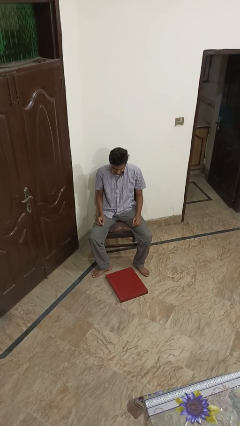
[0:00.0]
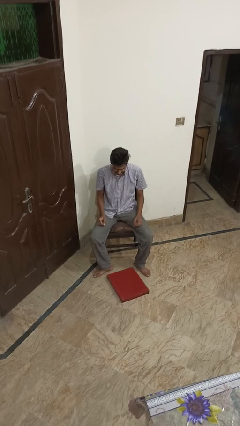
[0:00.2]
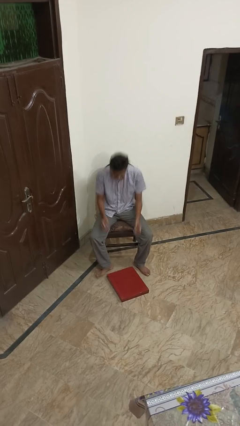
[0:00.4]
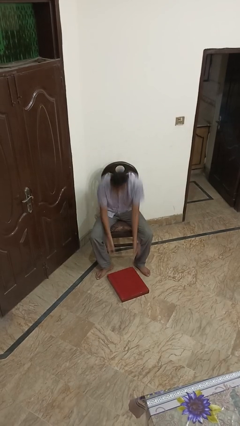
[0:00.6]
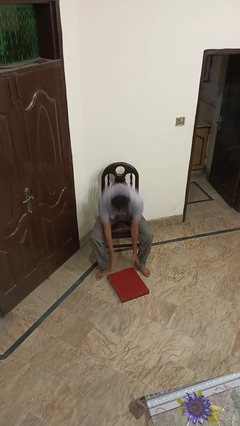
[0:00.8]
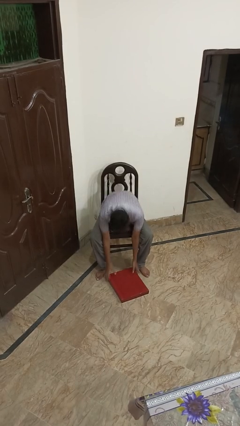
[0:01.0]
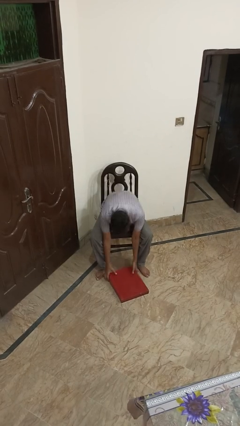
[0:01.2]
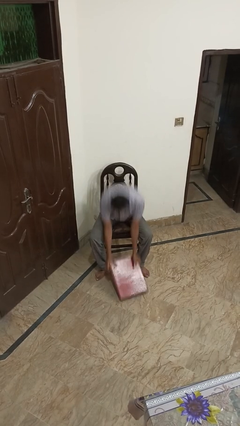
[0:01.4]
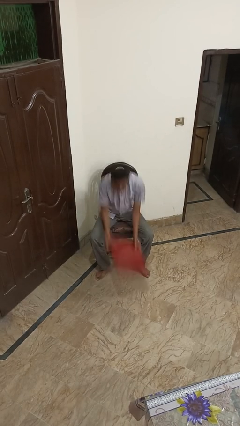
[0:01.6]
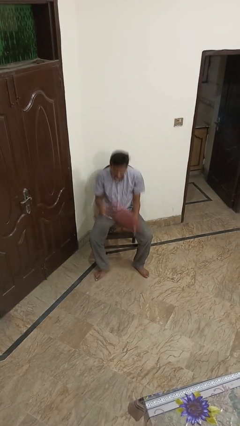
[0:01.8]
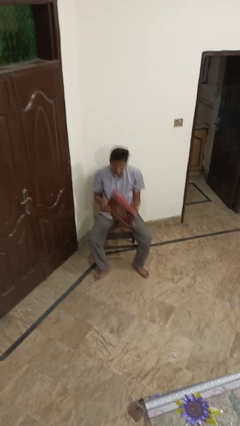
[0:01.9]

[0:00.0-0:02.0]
person picks up object from floor

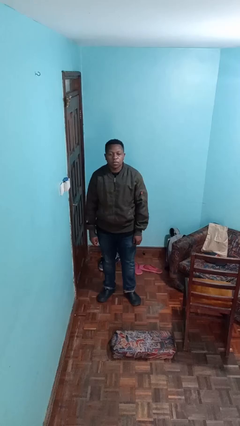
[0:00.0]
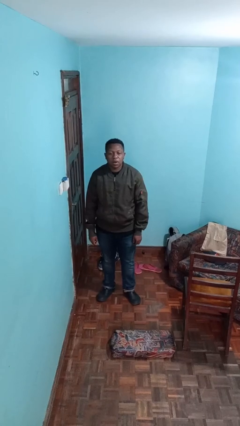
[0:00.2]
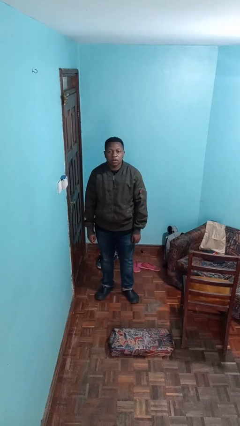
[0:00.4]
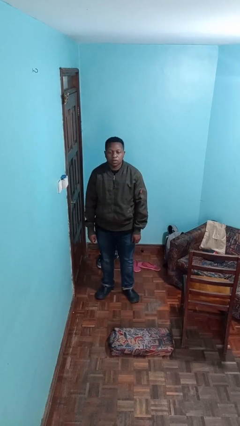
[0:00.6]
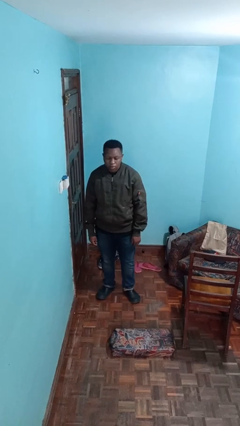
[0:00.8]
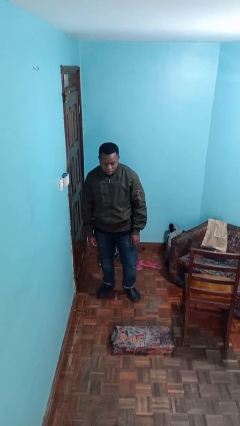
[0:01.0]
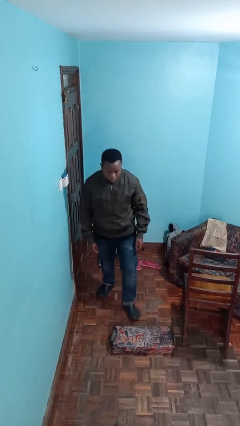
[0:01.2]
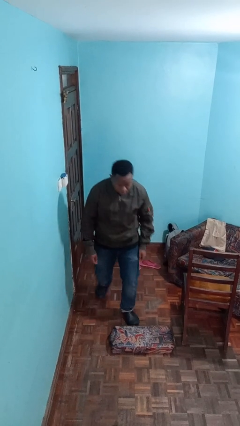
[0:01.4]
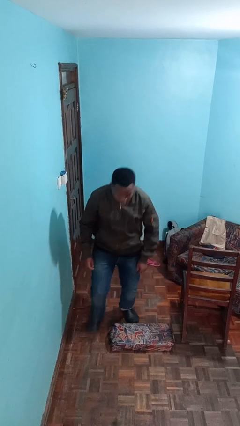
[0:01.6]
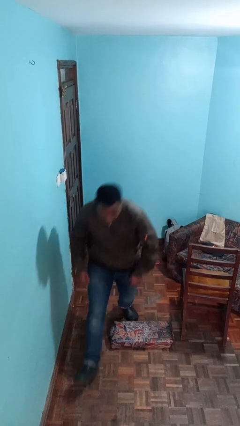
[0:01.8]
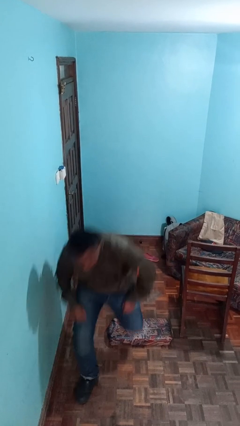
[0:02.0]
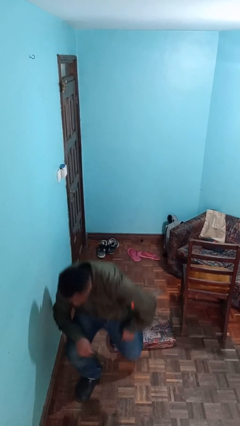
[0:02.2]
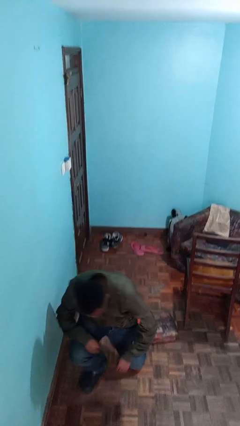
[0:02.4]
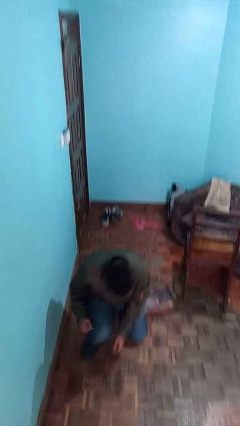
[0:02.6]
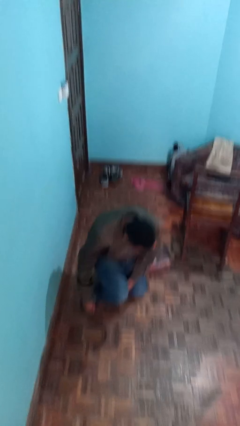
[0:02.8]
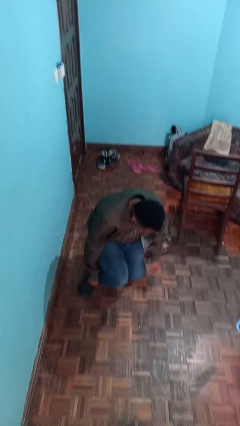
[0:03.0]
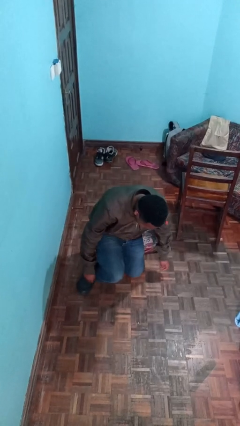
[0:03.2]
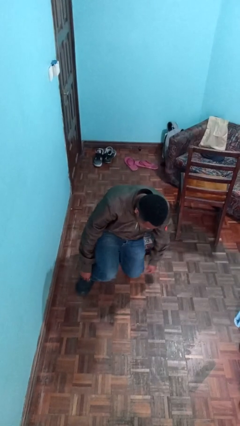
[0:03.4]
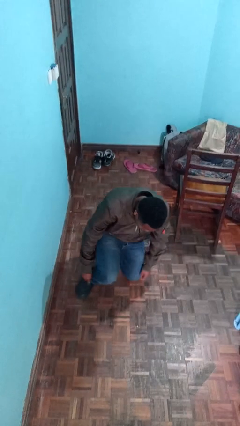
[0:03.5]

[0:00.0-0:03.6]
person trips on object on floor

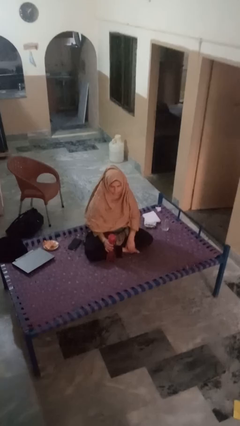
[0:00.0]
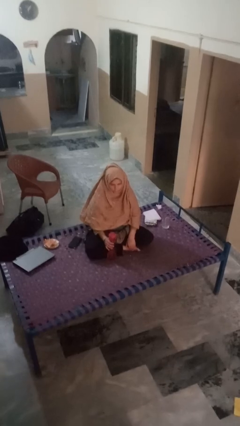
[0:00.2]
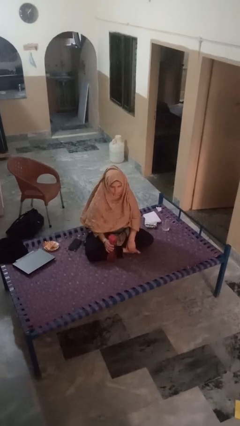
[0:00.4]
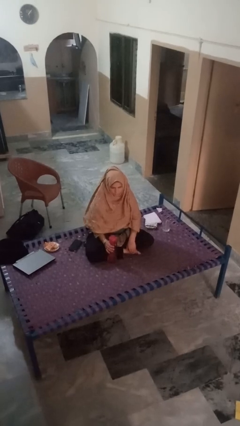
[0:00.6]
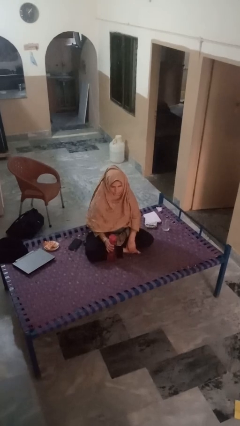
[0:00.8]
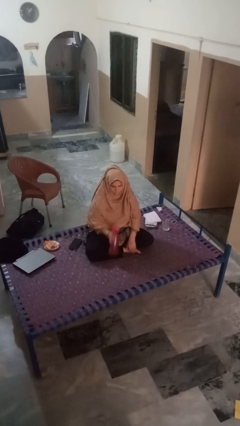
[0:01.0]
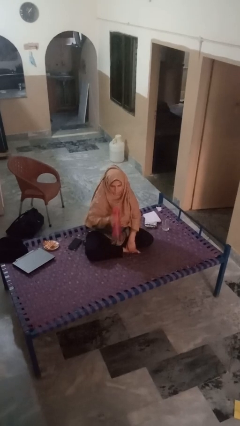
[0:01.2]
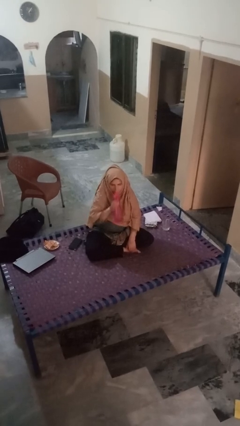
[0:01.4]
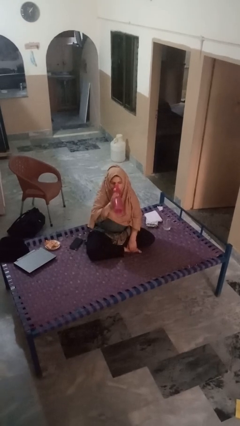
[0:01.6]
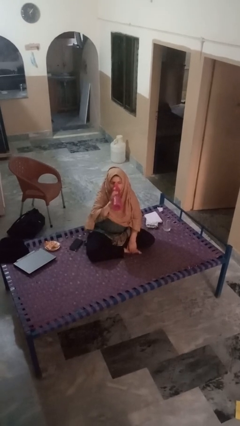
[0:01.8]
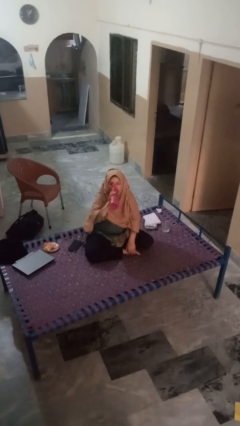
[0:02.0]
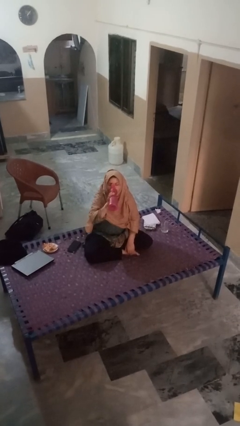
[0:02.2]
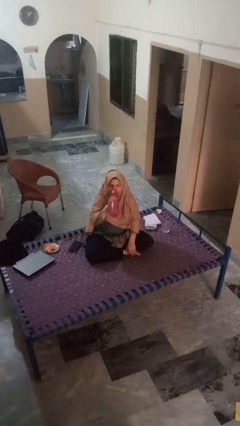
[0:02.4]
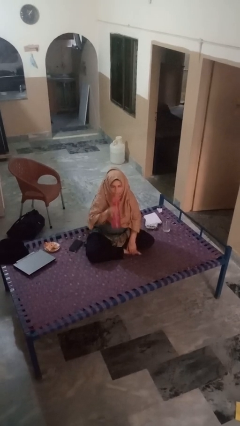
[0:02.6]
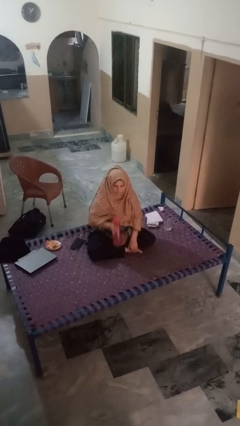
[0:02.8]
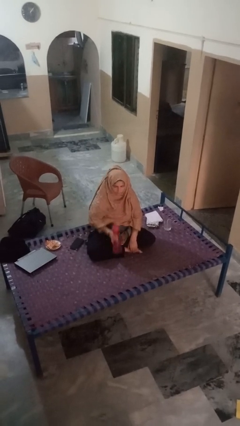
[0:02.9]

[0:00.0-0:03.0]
person drinks from bottle

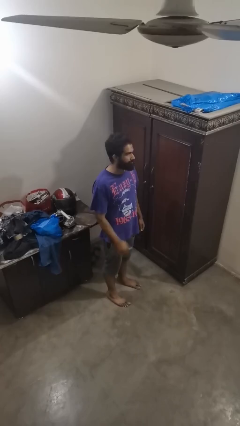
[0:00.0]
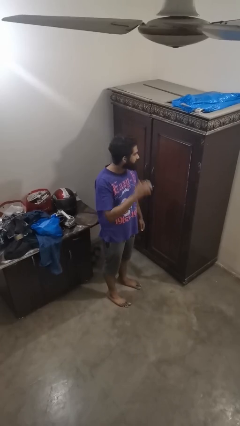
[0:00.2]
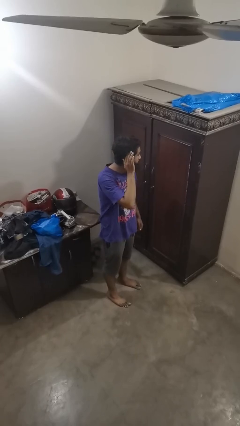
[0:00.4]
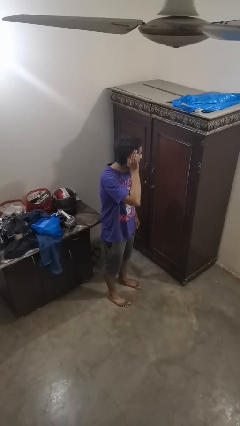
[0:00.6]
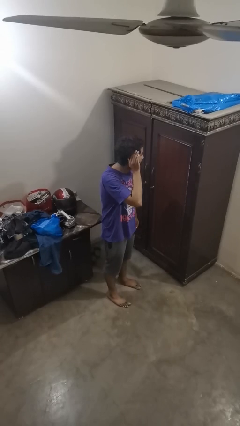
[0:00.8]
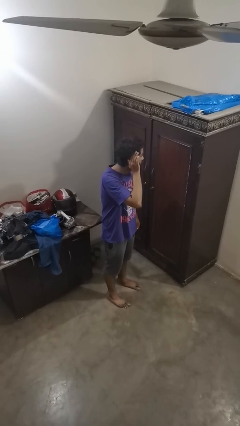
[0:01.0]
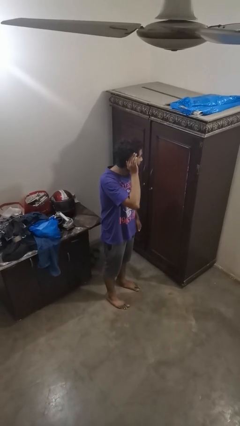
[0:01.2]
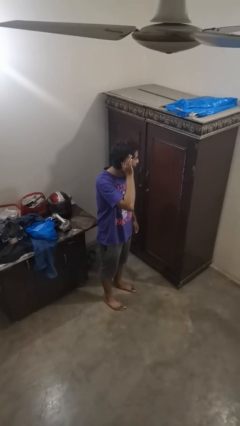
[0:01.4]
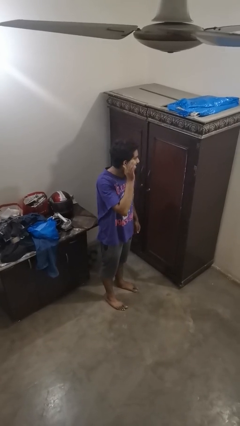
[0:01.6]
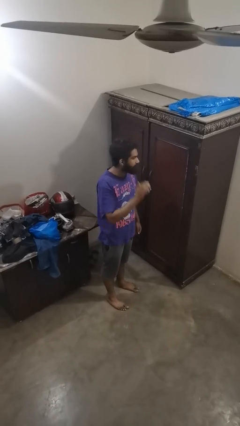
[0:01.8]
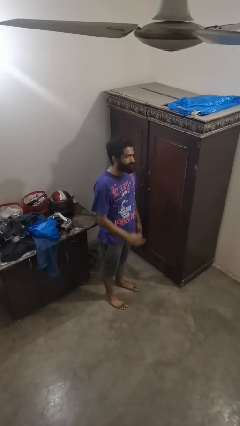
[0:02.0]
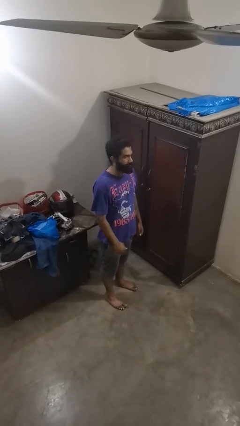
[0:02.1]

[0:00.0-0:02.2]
person gestures listen closely

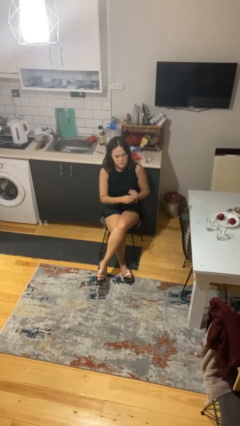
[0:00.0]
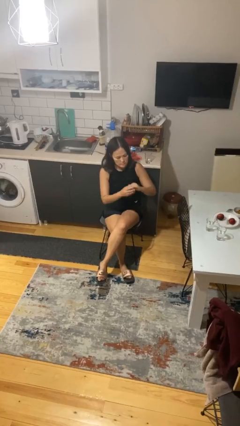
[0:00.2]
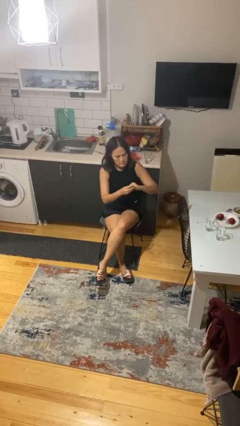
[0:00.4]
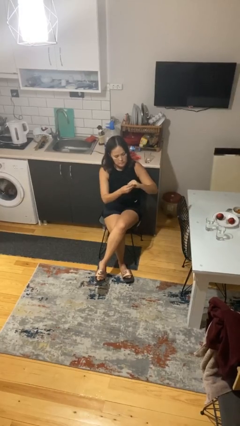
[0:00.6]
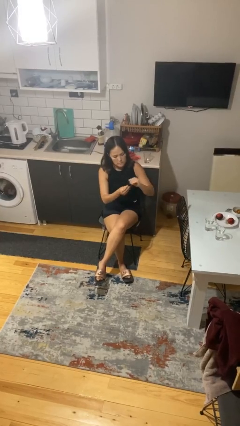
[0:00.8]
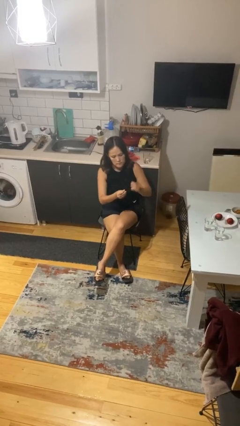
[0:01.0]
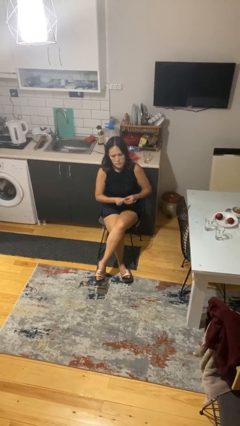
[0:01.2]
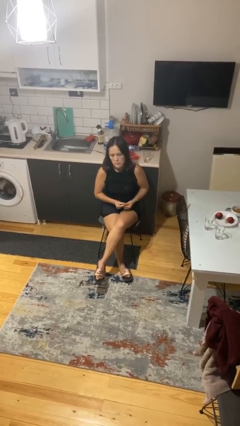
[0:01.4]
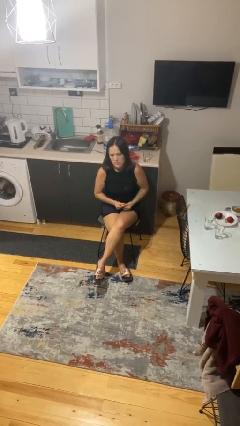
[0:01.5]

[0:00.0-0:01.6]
person takes off ring

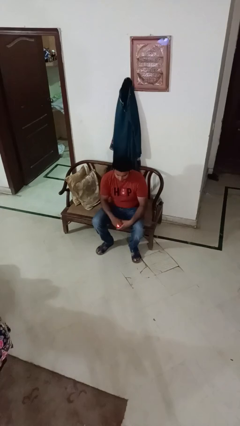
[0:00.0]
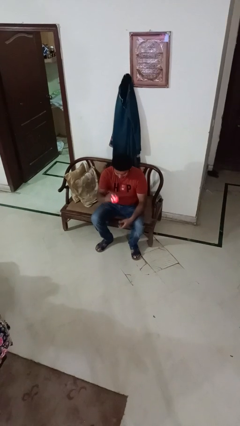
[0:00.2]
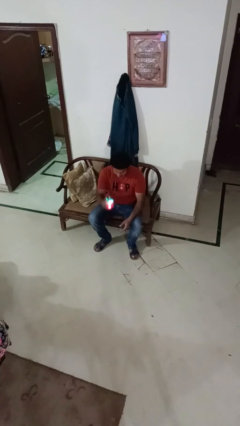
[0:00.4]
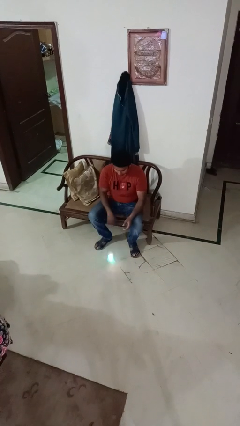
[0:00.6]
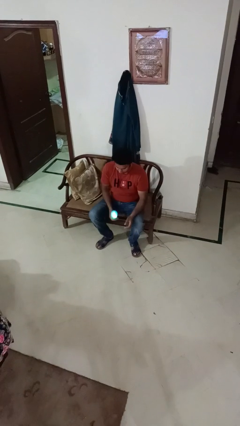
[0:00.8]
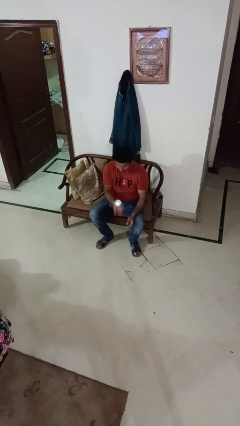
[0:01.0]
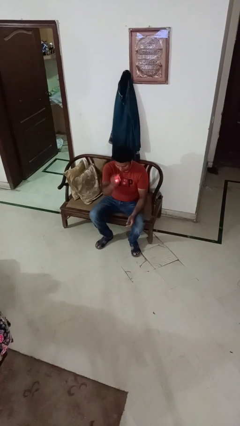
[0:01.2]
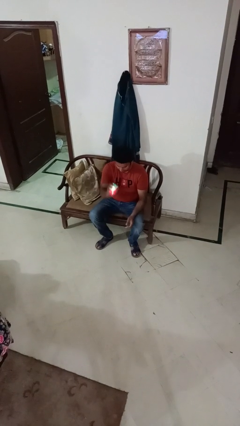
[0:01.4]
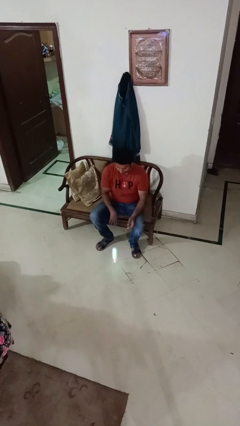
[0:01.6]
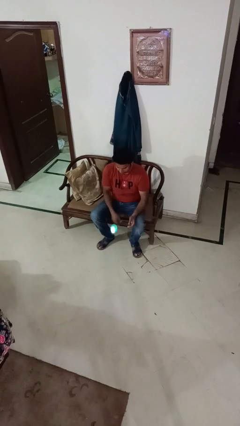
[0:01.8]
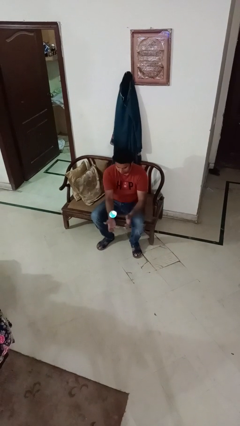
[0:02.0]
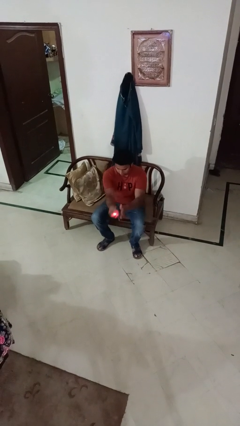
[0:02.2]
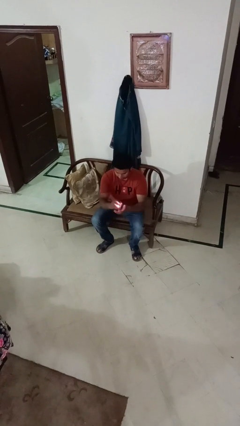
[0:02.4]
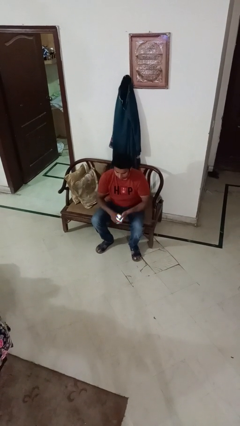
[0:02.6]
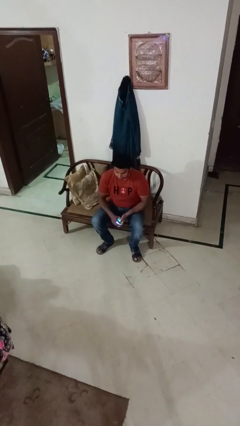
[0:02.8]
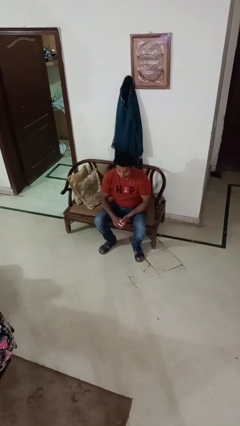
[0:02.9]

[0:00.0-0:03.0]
person bounces ball on floor

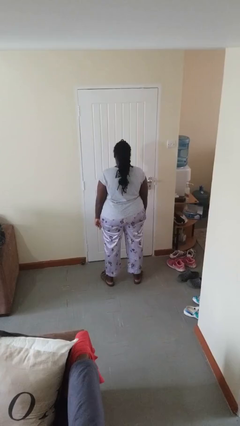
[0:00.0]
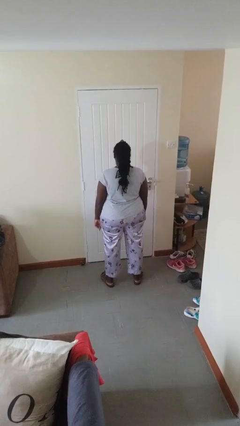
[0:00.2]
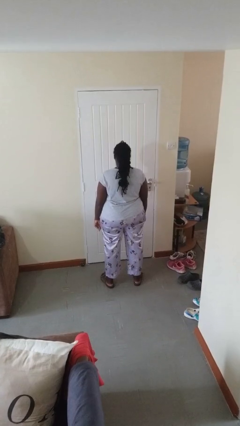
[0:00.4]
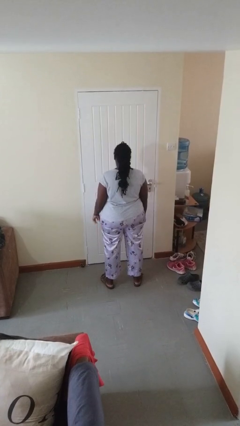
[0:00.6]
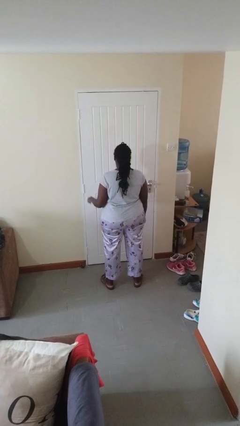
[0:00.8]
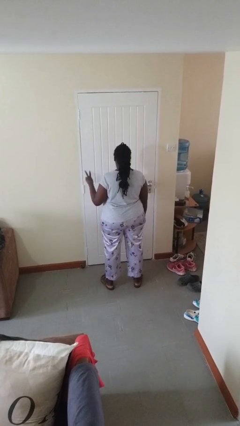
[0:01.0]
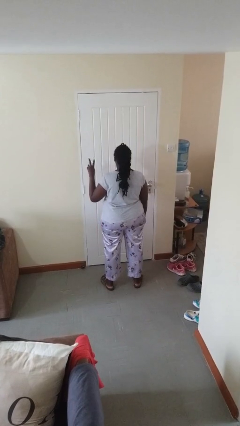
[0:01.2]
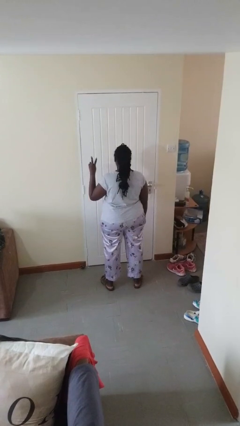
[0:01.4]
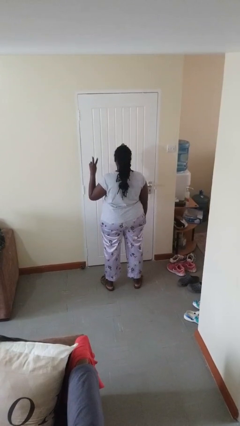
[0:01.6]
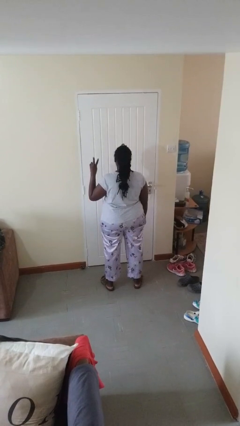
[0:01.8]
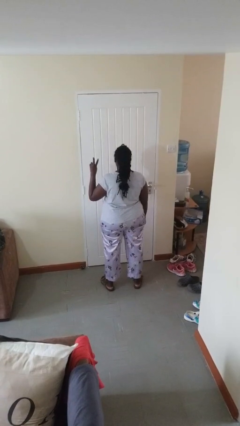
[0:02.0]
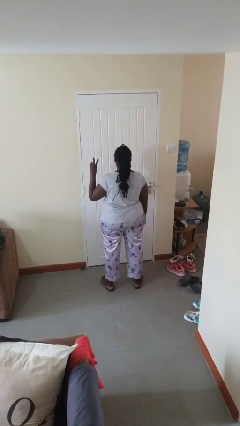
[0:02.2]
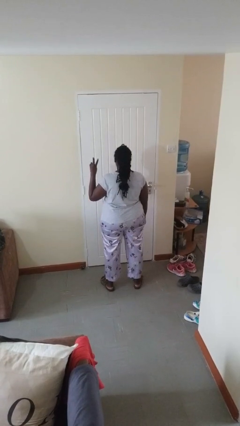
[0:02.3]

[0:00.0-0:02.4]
person gestures peace
